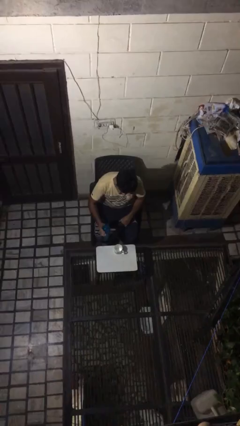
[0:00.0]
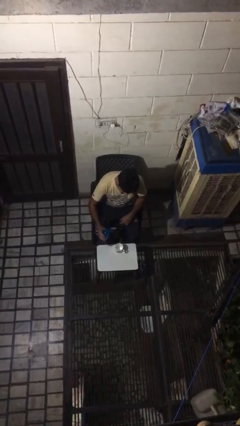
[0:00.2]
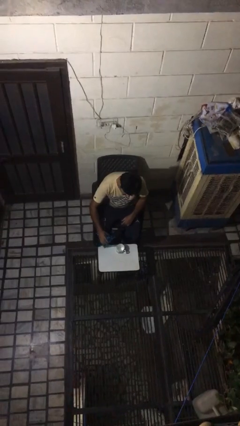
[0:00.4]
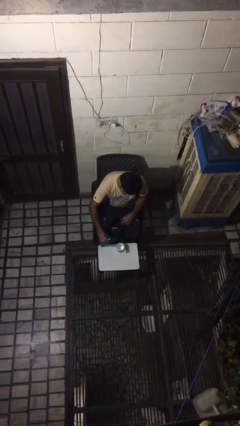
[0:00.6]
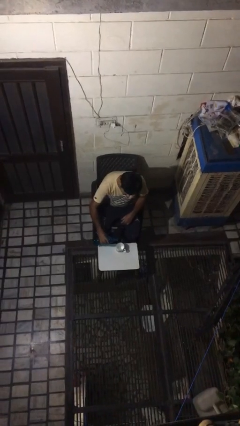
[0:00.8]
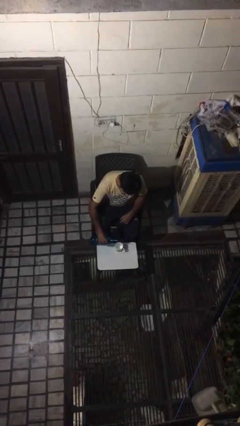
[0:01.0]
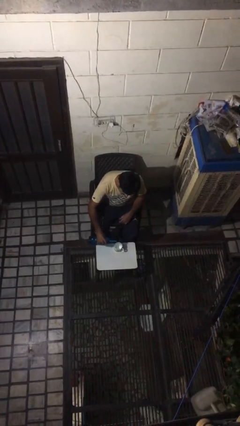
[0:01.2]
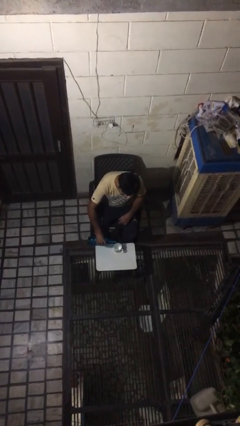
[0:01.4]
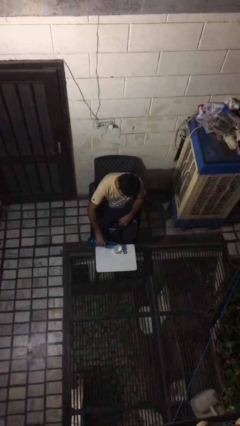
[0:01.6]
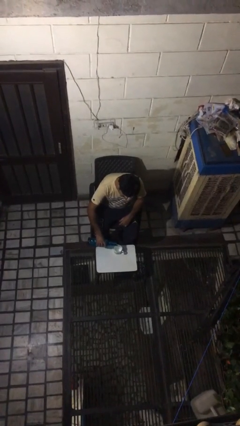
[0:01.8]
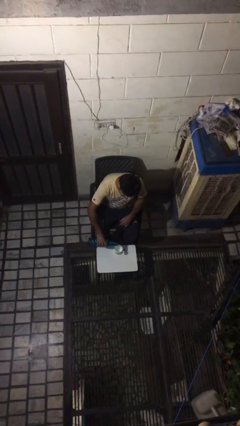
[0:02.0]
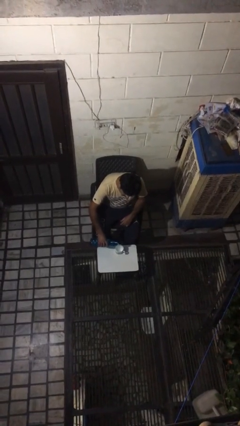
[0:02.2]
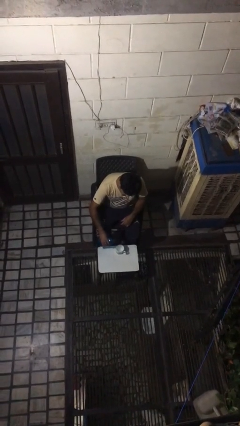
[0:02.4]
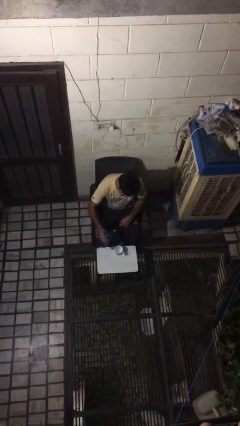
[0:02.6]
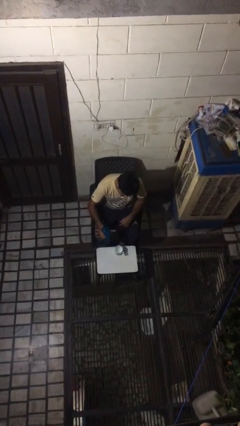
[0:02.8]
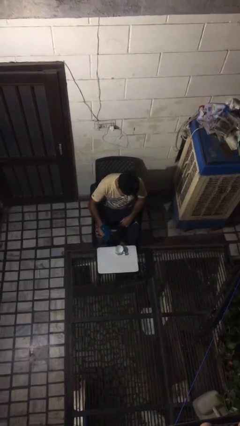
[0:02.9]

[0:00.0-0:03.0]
person pours liquid into cup

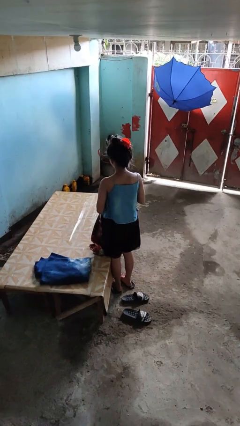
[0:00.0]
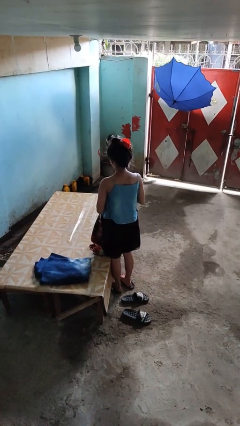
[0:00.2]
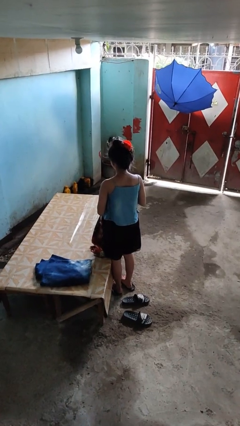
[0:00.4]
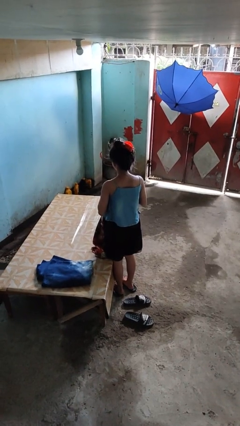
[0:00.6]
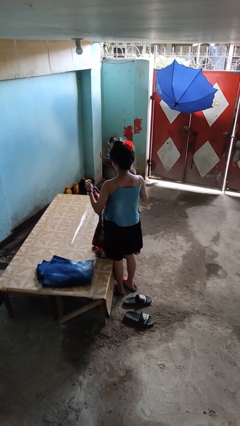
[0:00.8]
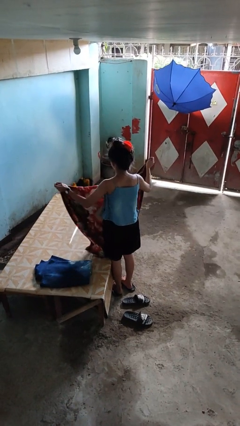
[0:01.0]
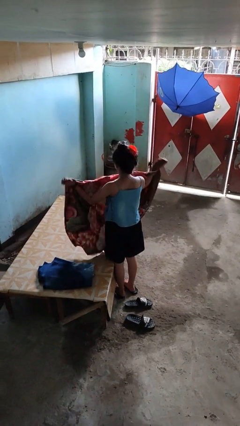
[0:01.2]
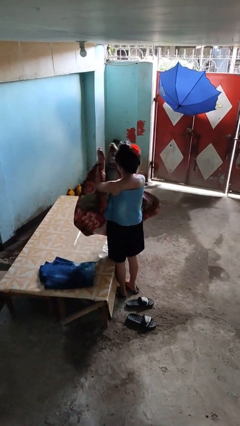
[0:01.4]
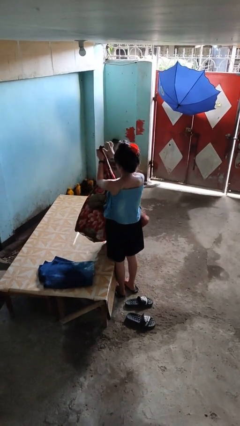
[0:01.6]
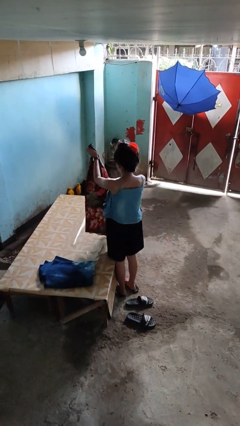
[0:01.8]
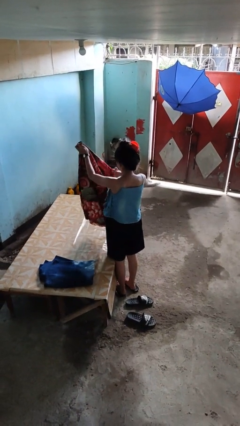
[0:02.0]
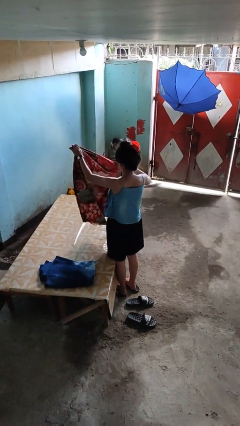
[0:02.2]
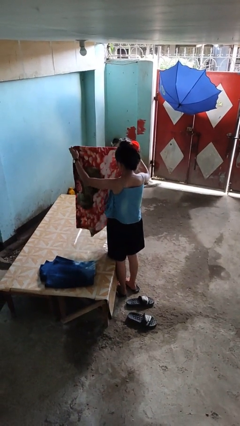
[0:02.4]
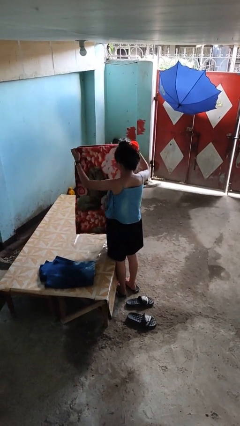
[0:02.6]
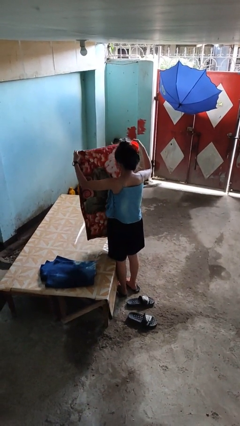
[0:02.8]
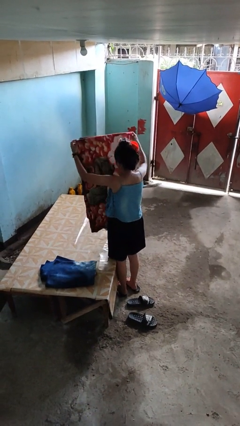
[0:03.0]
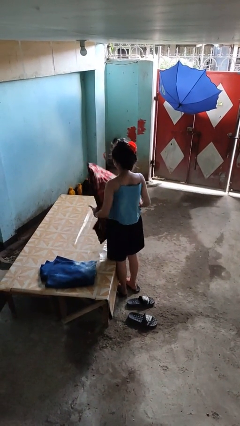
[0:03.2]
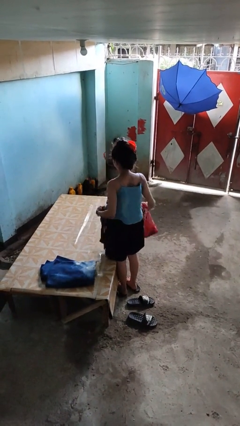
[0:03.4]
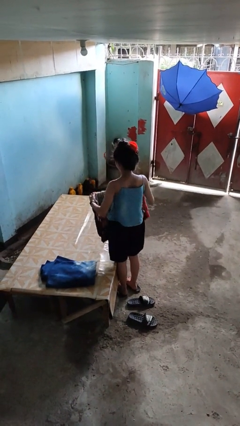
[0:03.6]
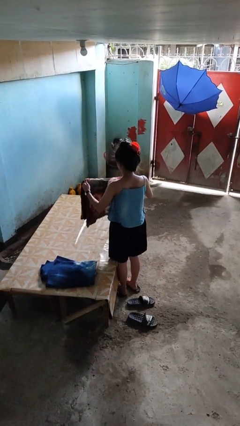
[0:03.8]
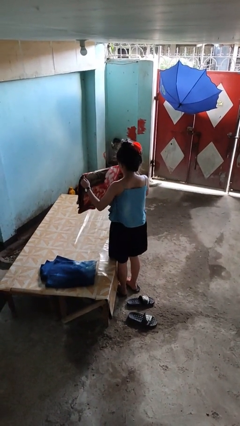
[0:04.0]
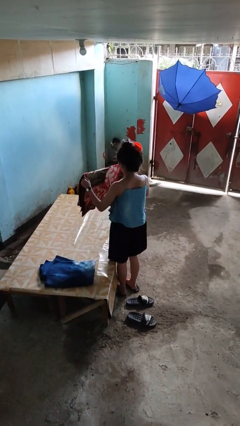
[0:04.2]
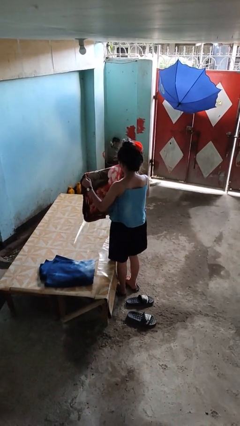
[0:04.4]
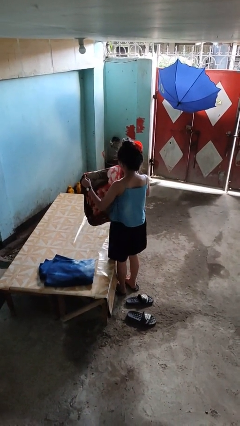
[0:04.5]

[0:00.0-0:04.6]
person folds blanket

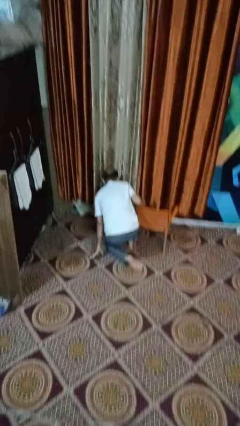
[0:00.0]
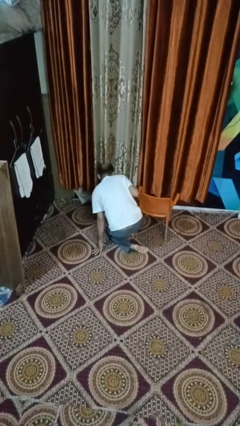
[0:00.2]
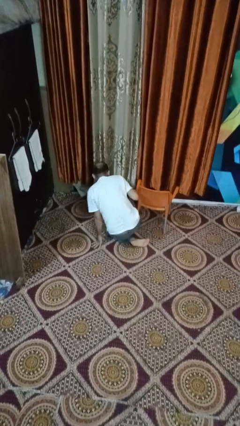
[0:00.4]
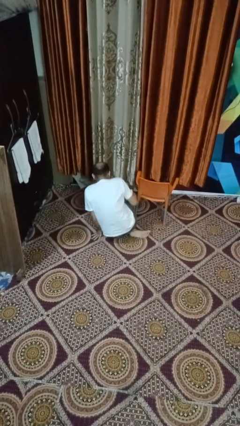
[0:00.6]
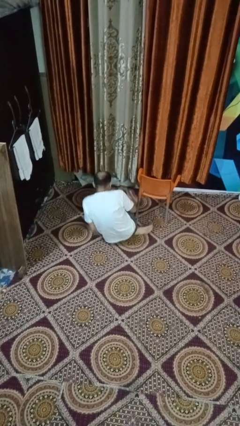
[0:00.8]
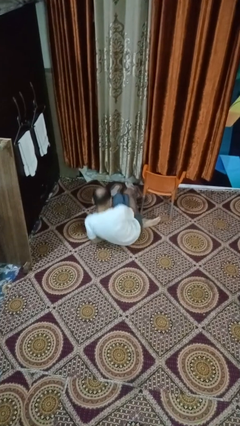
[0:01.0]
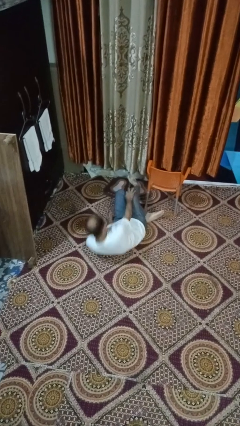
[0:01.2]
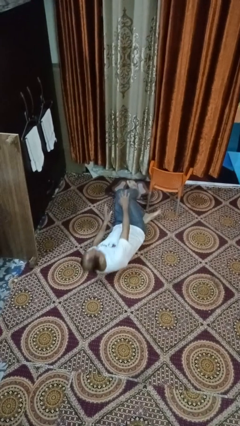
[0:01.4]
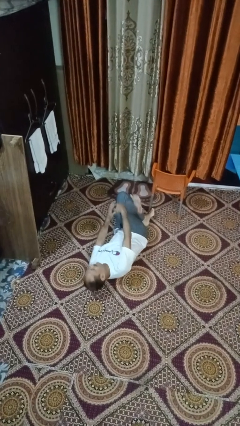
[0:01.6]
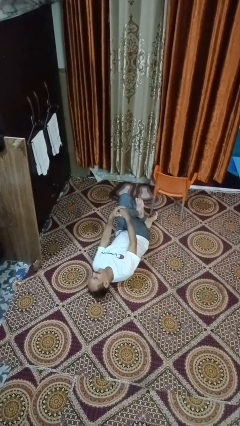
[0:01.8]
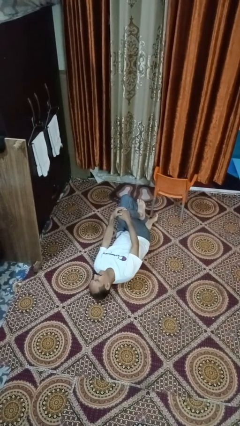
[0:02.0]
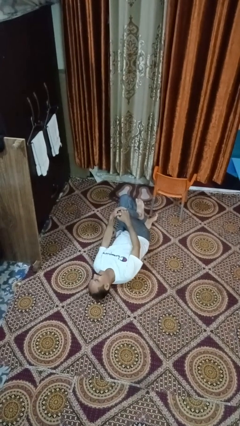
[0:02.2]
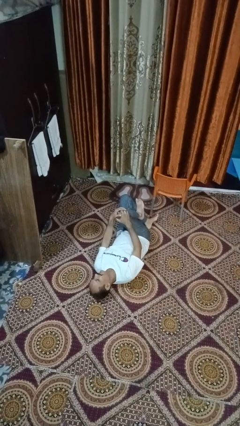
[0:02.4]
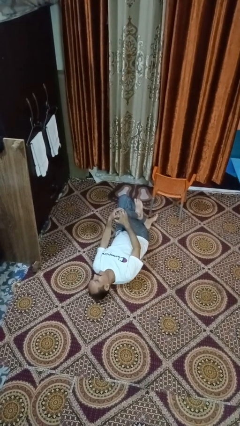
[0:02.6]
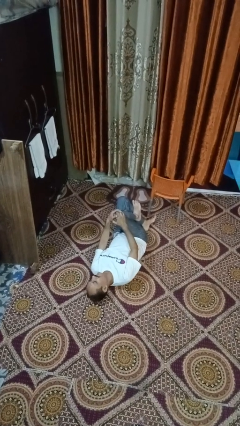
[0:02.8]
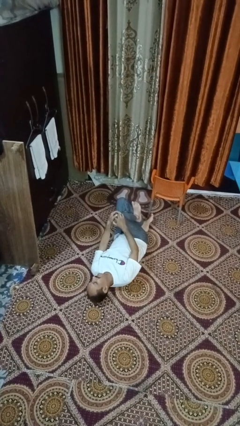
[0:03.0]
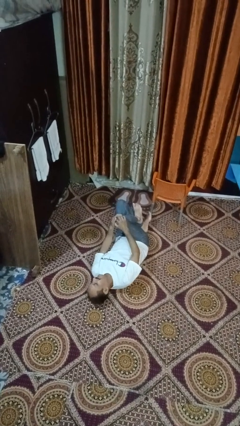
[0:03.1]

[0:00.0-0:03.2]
person lies down on floor

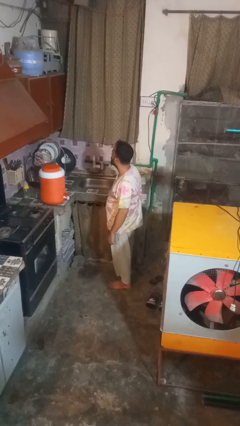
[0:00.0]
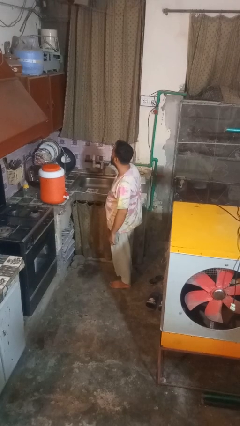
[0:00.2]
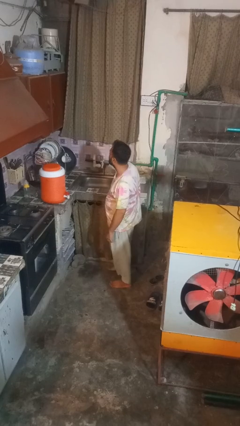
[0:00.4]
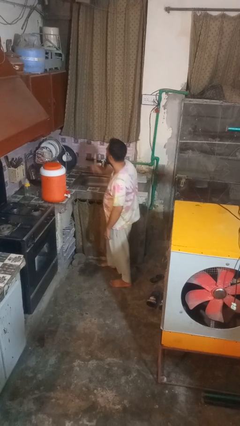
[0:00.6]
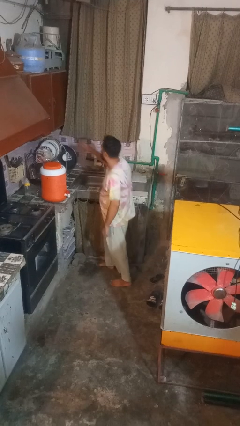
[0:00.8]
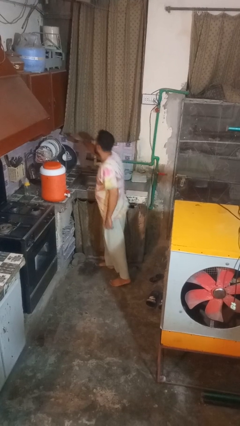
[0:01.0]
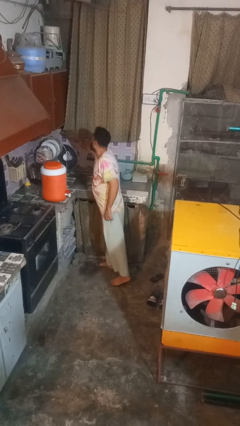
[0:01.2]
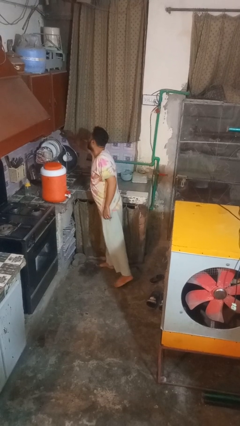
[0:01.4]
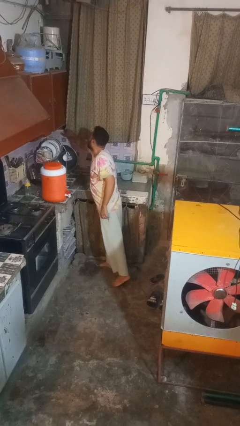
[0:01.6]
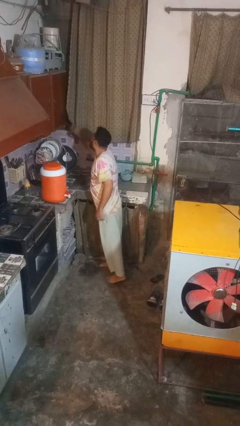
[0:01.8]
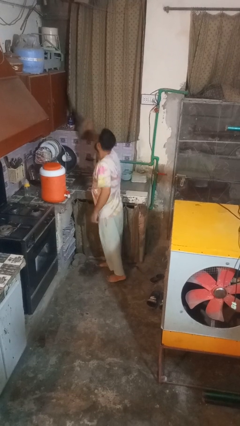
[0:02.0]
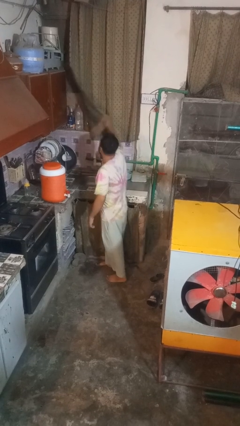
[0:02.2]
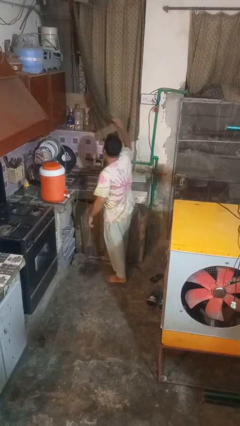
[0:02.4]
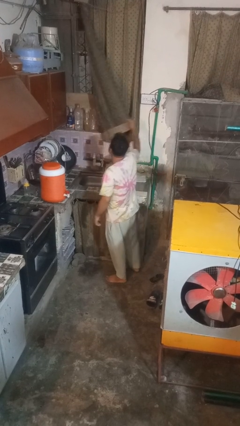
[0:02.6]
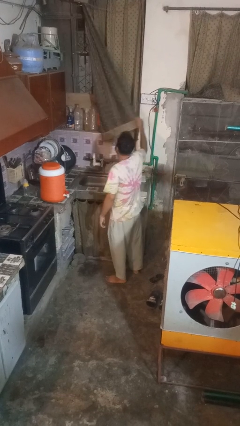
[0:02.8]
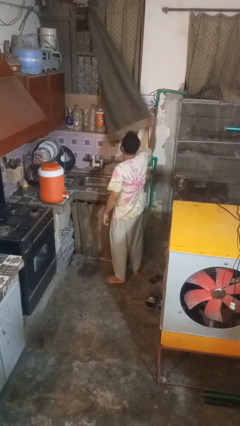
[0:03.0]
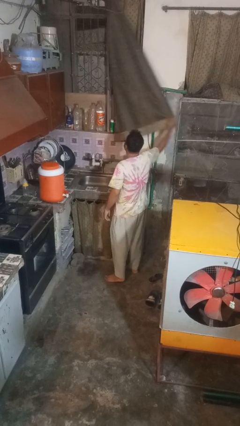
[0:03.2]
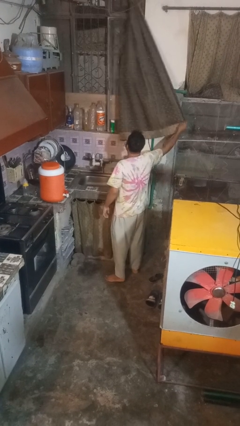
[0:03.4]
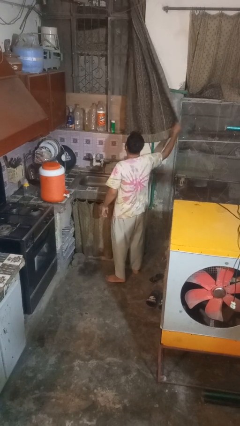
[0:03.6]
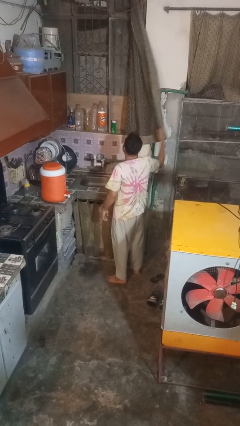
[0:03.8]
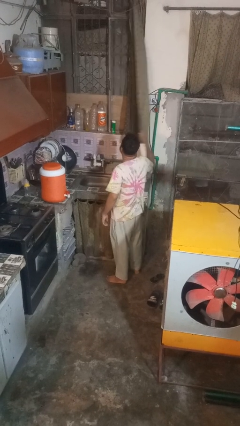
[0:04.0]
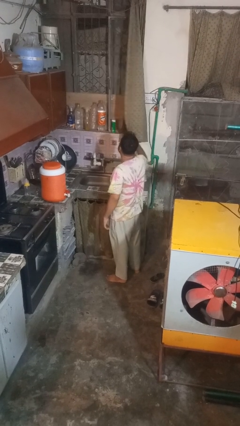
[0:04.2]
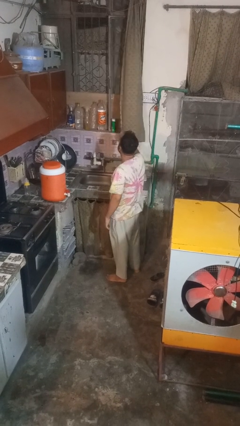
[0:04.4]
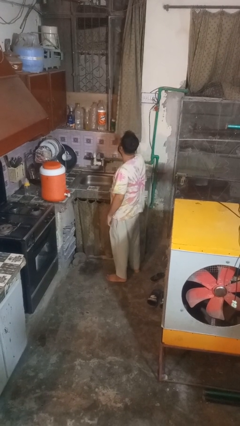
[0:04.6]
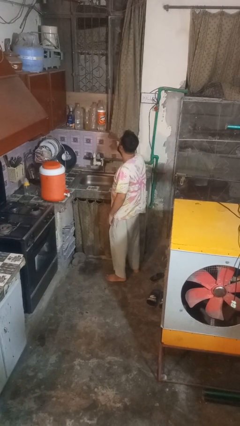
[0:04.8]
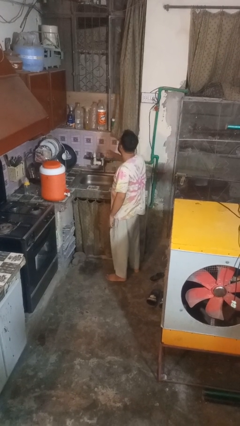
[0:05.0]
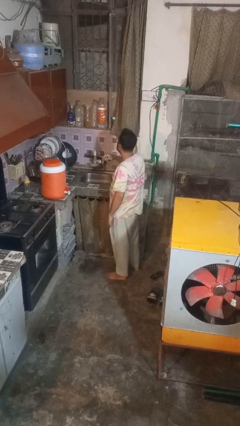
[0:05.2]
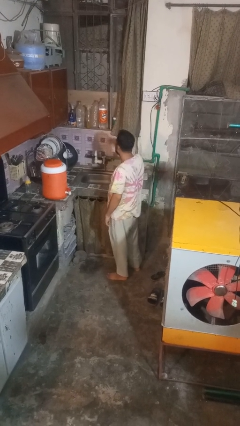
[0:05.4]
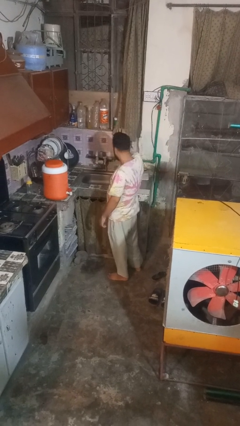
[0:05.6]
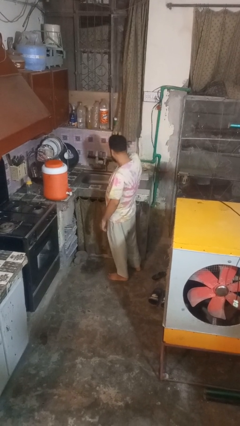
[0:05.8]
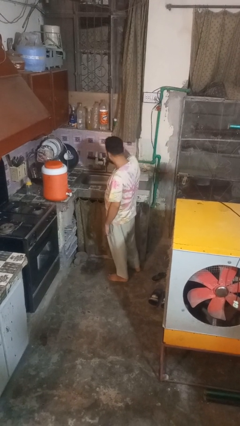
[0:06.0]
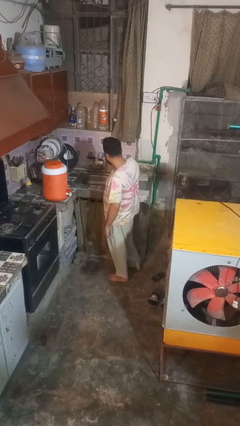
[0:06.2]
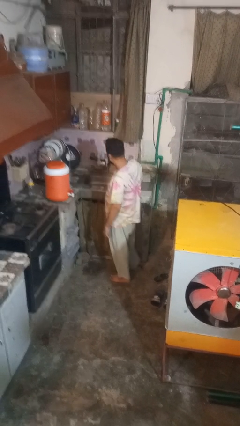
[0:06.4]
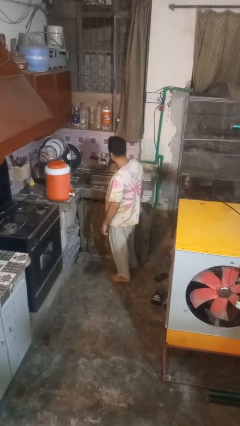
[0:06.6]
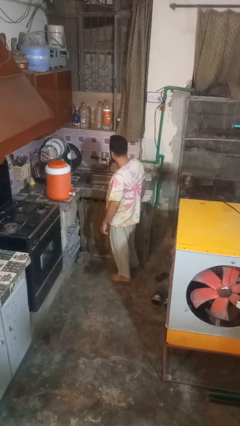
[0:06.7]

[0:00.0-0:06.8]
person opens curtains
